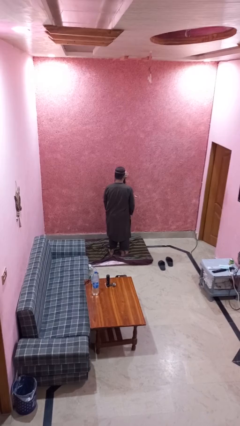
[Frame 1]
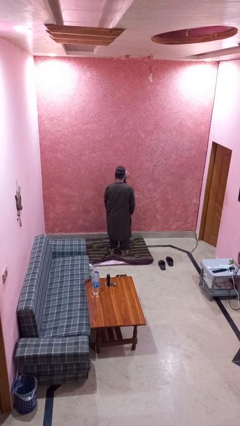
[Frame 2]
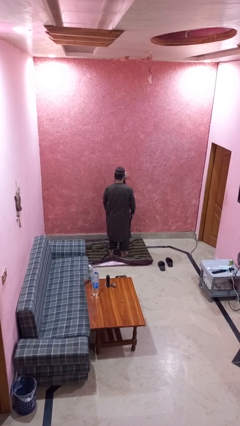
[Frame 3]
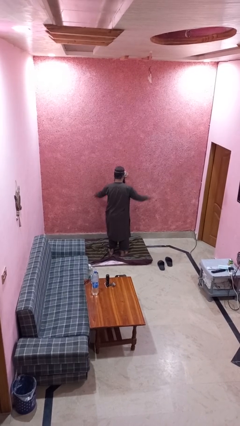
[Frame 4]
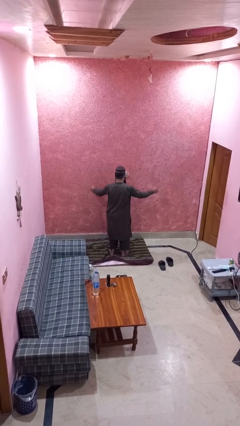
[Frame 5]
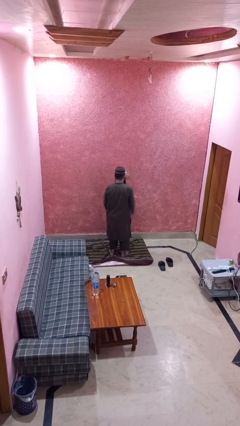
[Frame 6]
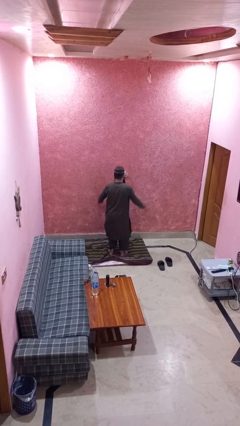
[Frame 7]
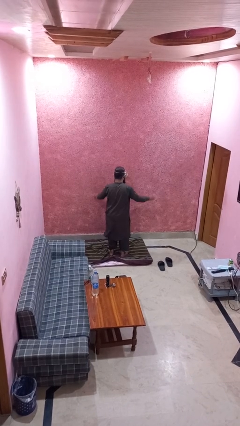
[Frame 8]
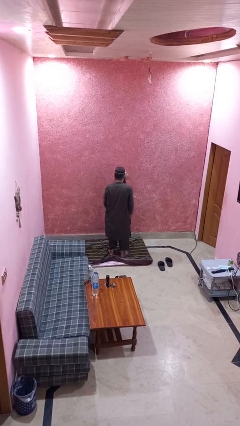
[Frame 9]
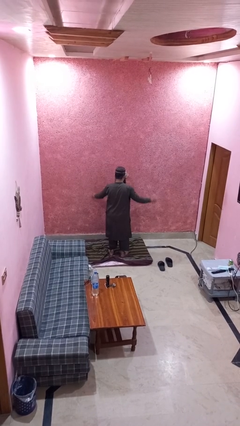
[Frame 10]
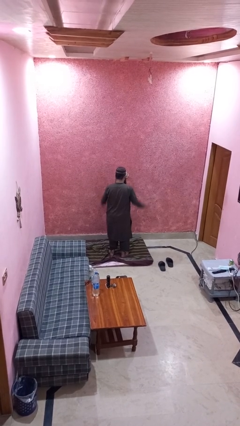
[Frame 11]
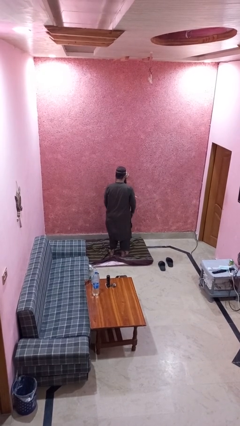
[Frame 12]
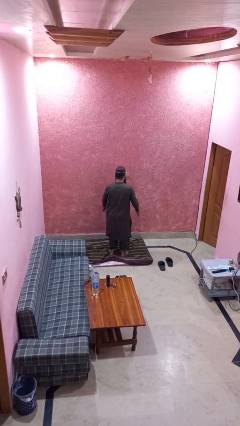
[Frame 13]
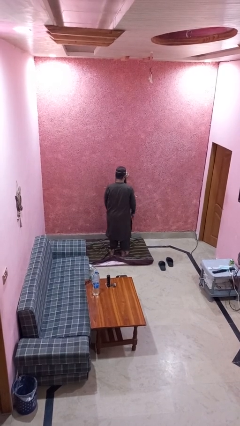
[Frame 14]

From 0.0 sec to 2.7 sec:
person slaps hands on thighs

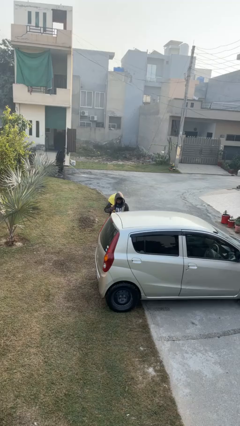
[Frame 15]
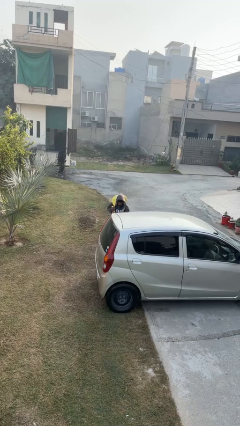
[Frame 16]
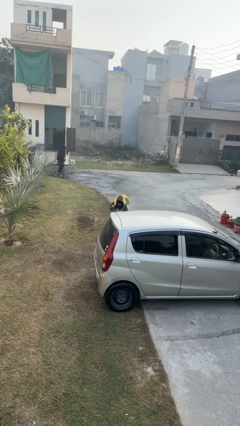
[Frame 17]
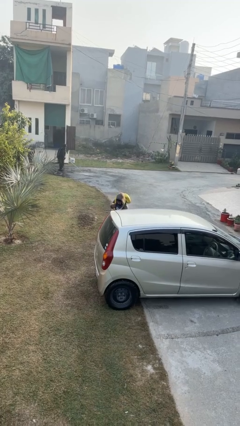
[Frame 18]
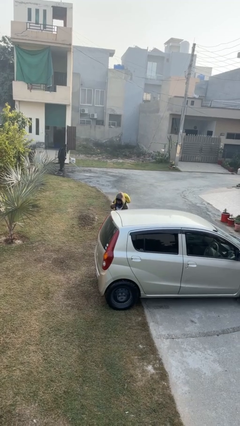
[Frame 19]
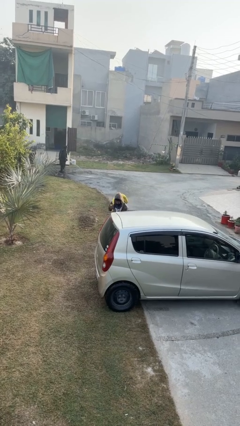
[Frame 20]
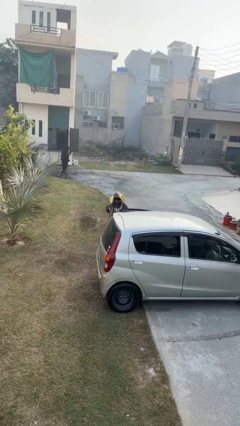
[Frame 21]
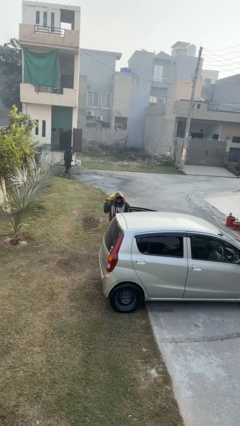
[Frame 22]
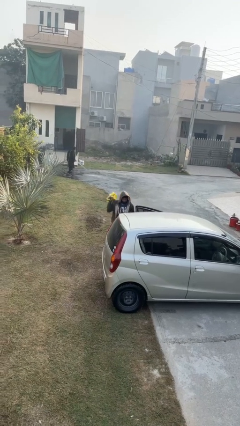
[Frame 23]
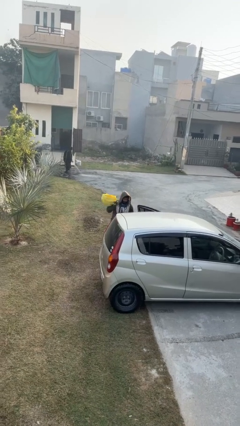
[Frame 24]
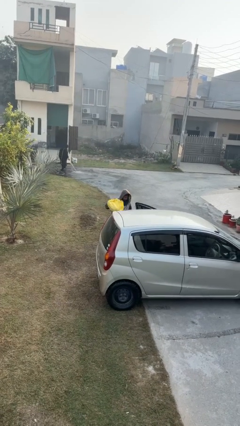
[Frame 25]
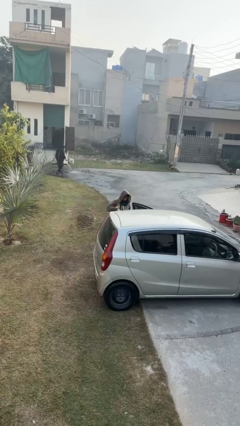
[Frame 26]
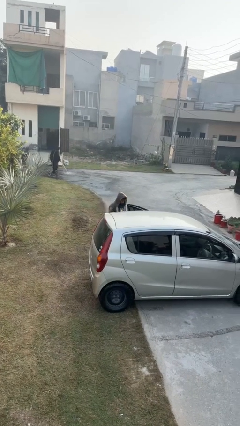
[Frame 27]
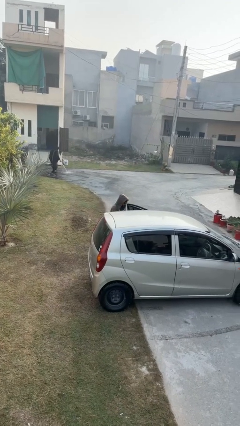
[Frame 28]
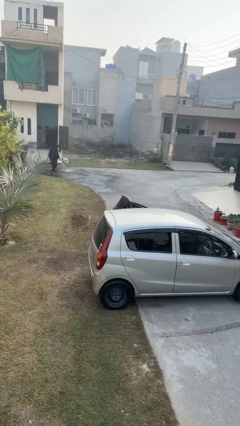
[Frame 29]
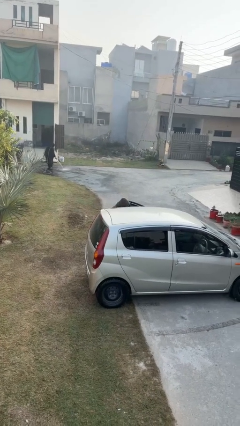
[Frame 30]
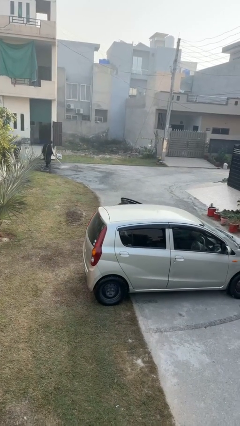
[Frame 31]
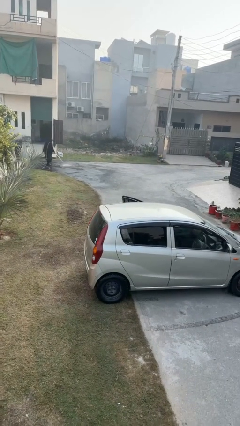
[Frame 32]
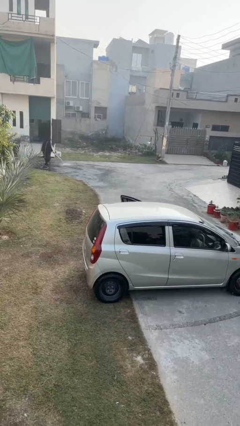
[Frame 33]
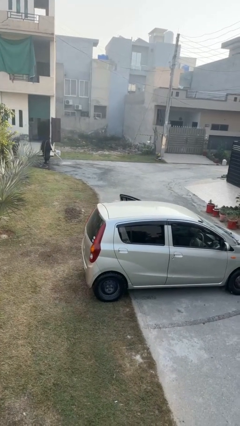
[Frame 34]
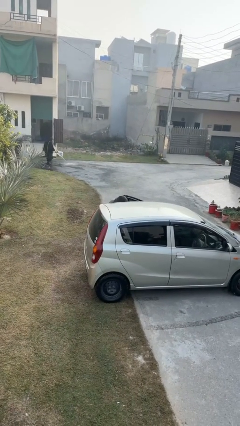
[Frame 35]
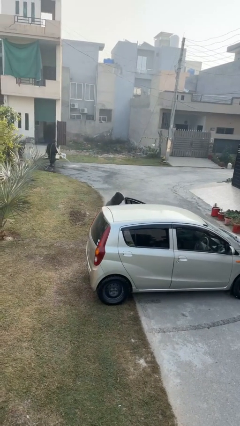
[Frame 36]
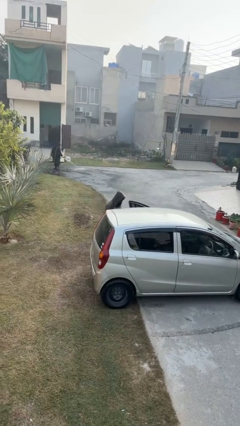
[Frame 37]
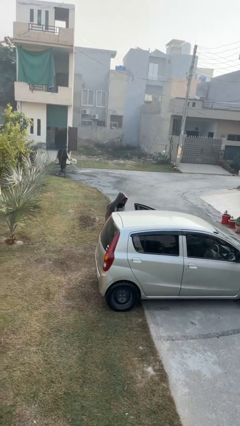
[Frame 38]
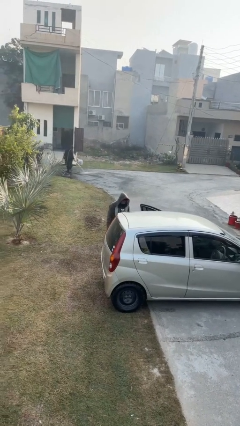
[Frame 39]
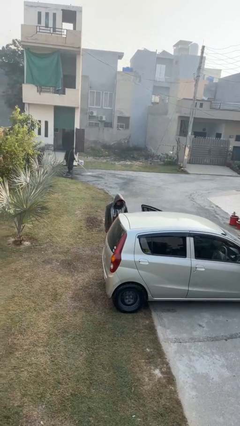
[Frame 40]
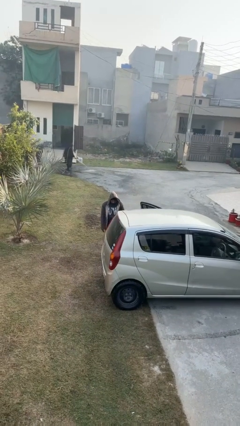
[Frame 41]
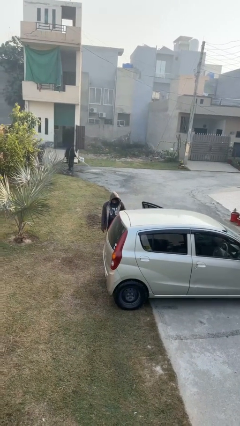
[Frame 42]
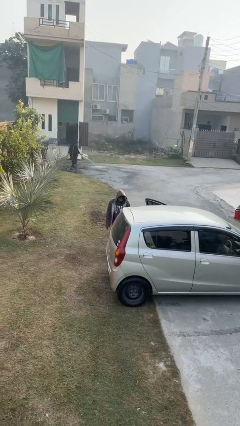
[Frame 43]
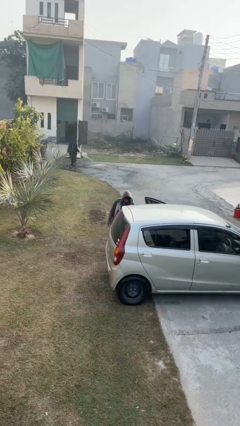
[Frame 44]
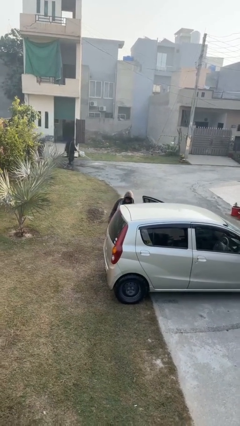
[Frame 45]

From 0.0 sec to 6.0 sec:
person loads car

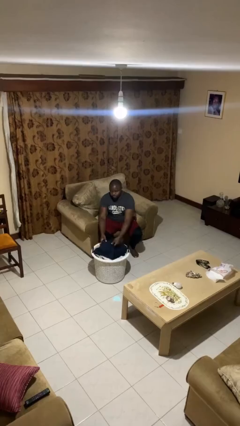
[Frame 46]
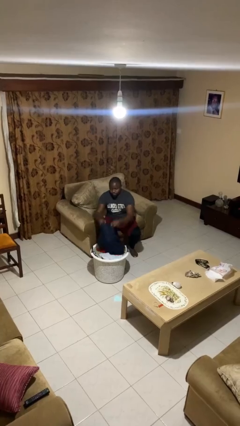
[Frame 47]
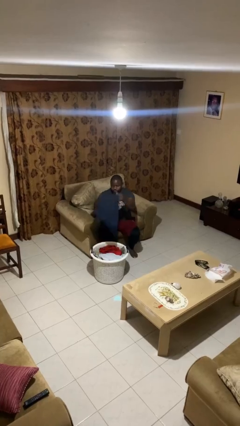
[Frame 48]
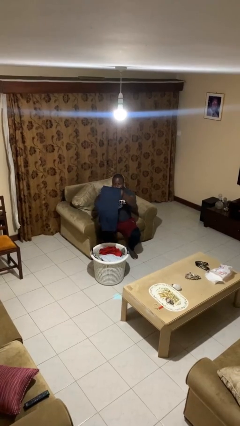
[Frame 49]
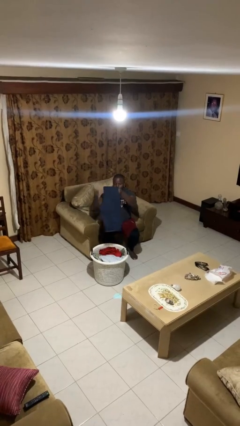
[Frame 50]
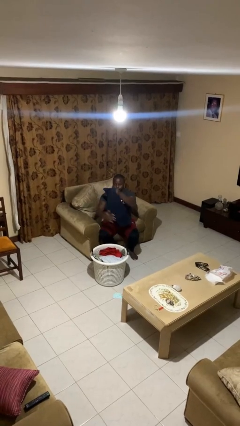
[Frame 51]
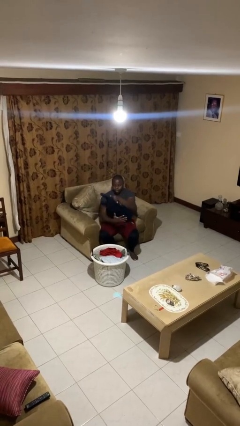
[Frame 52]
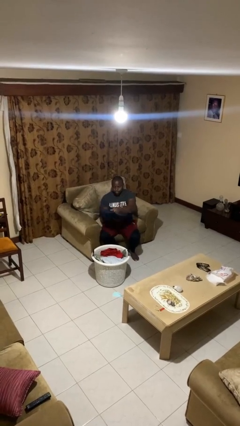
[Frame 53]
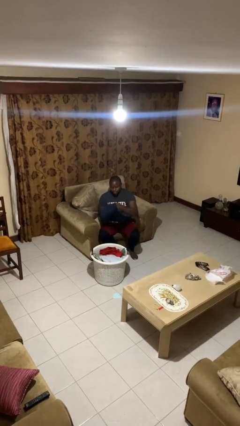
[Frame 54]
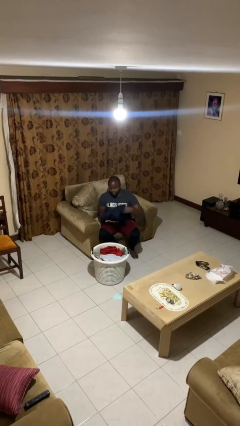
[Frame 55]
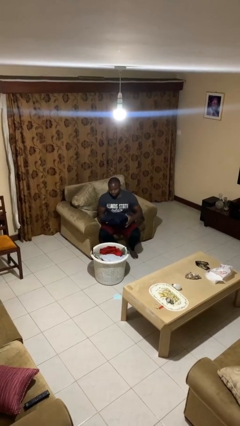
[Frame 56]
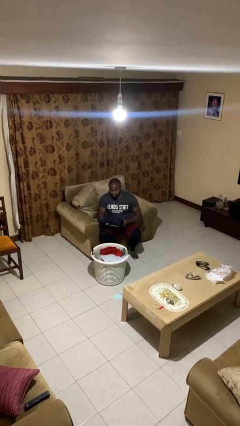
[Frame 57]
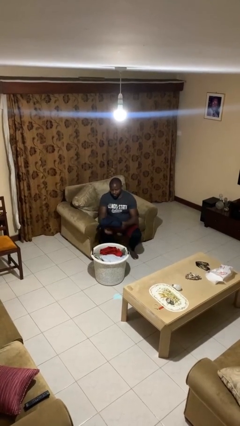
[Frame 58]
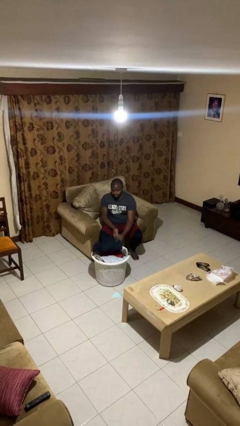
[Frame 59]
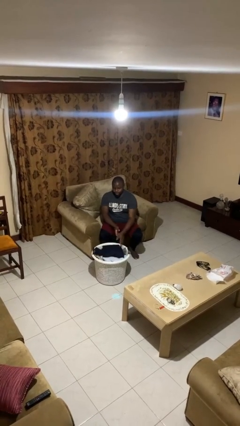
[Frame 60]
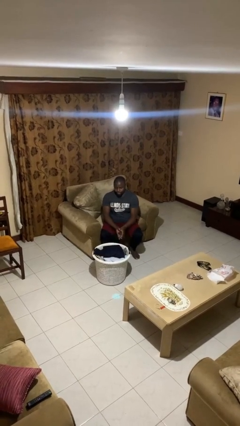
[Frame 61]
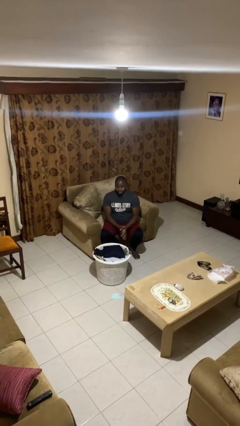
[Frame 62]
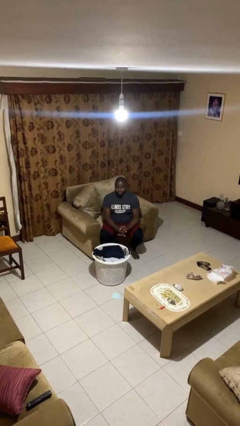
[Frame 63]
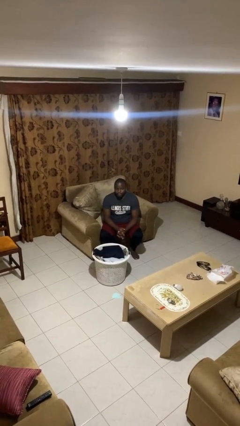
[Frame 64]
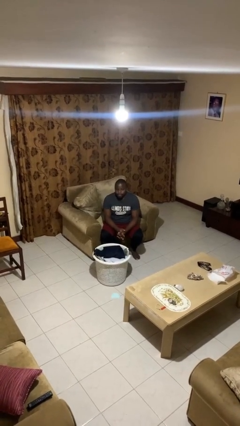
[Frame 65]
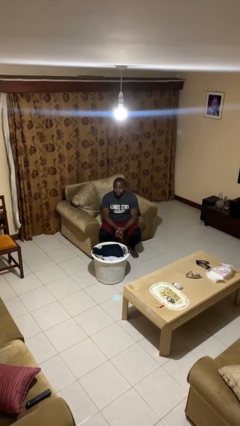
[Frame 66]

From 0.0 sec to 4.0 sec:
person folds pants

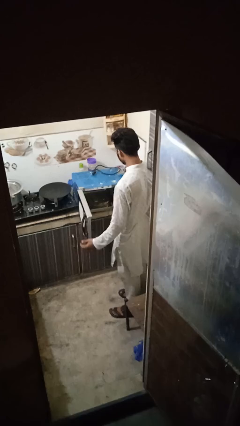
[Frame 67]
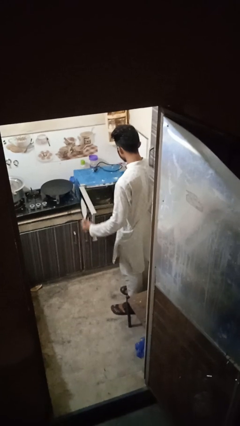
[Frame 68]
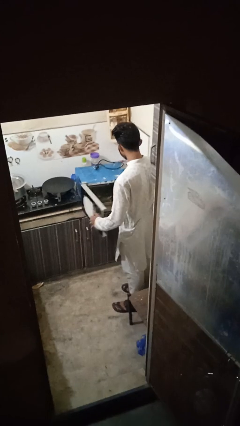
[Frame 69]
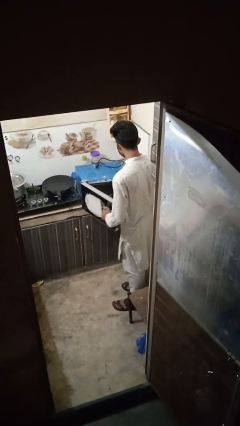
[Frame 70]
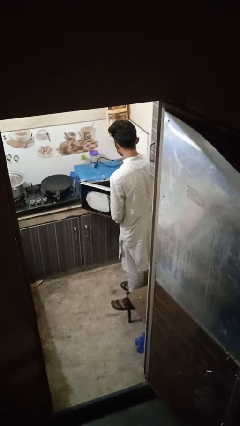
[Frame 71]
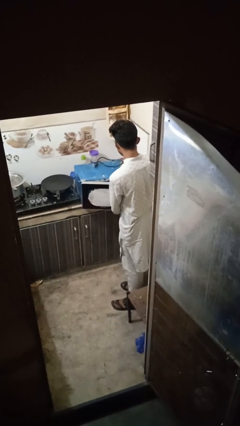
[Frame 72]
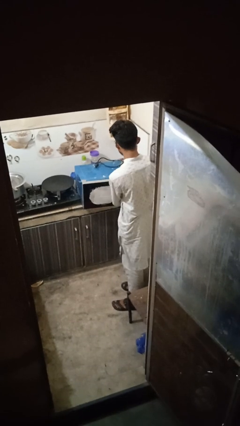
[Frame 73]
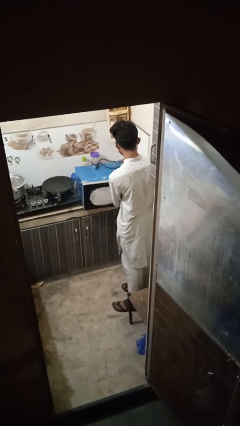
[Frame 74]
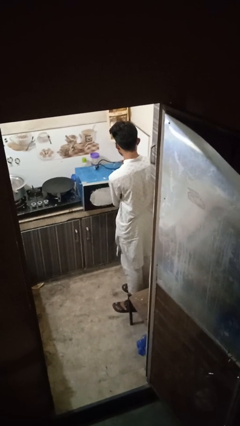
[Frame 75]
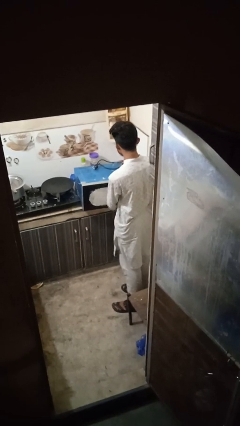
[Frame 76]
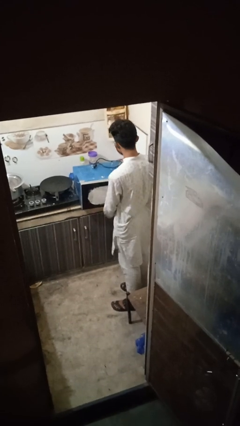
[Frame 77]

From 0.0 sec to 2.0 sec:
person closes oven door

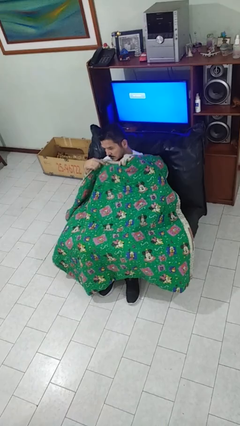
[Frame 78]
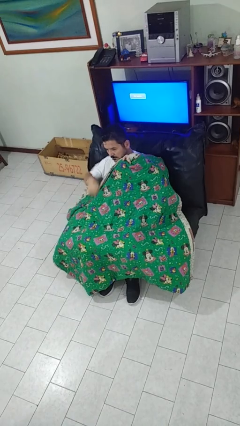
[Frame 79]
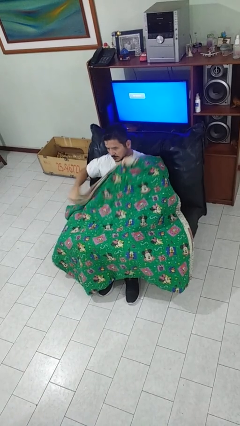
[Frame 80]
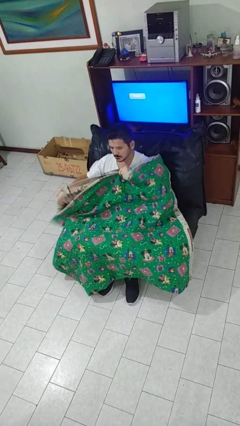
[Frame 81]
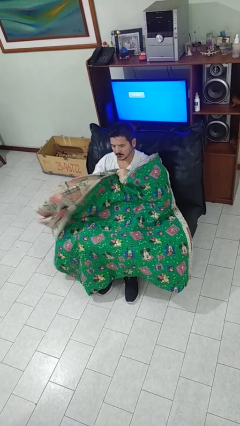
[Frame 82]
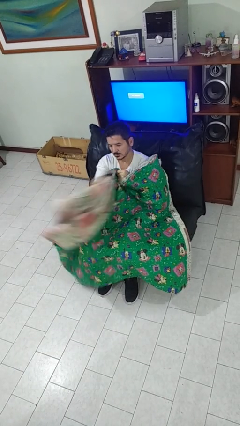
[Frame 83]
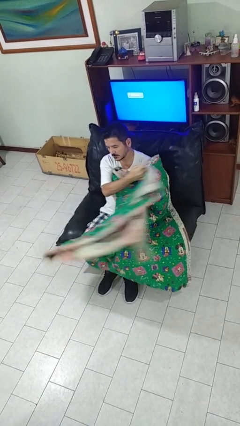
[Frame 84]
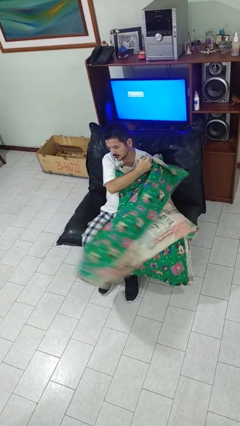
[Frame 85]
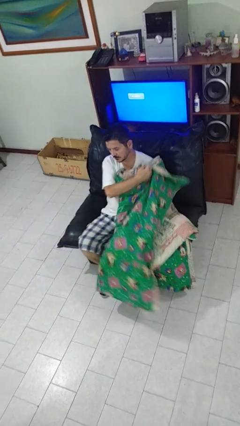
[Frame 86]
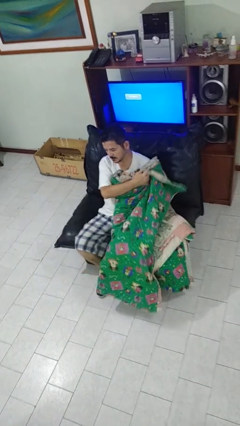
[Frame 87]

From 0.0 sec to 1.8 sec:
person uncovers with blanket

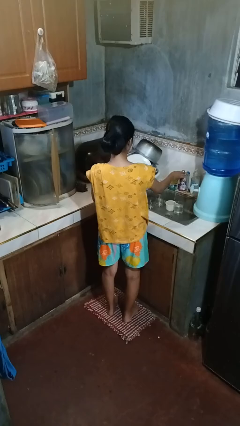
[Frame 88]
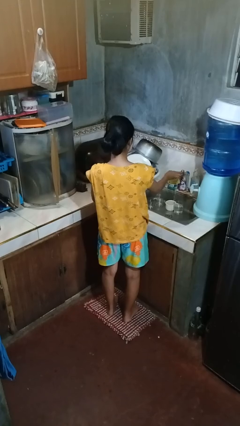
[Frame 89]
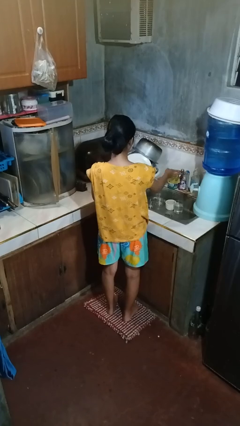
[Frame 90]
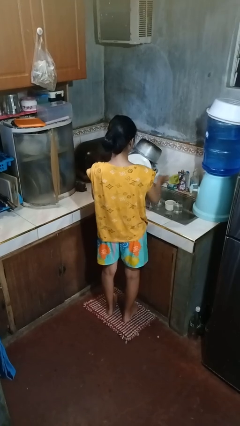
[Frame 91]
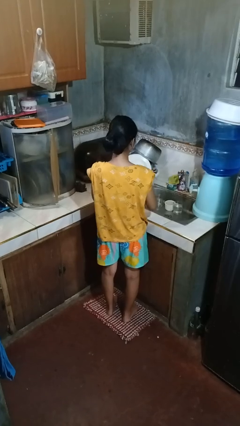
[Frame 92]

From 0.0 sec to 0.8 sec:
person turns off faucet
